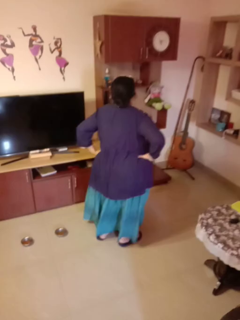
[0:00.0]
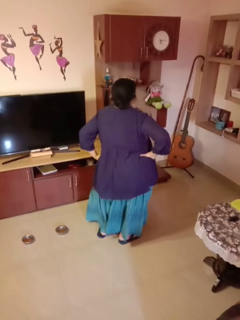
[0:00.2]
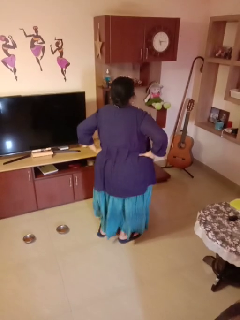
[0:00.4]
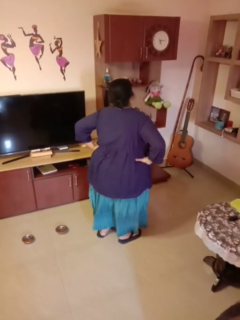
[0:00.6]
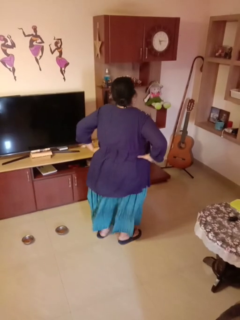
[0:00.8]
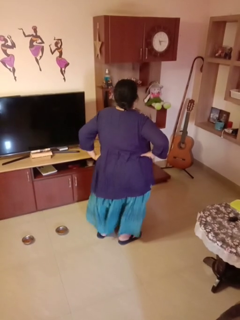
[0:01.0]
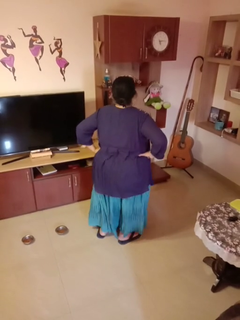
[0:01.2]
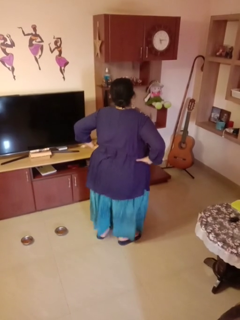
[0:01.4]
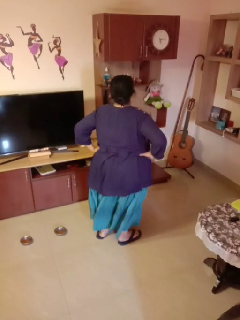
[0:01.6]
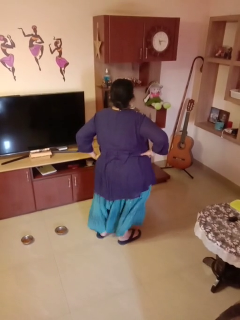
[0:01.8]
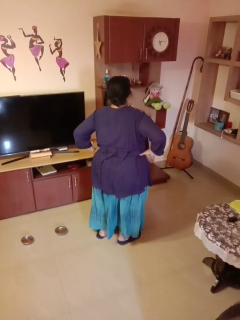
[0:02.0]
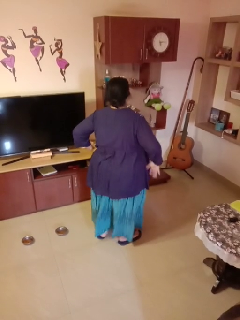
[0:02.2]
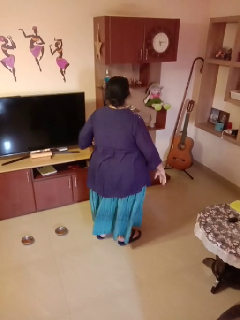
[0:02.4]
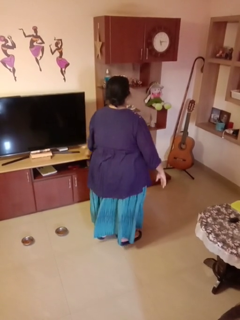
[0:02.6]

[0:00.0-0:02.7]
person wiggles hips

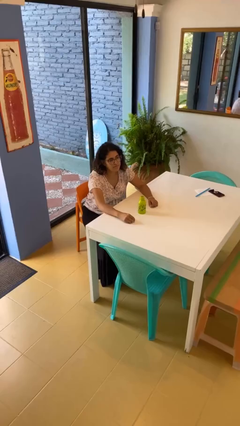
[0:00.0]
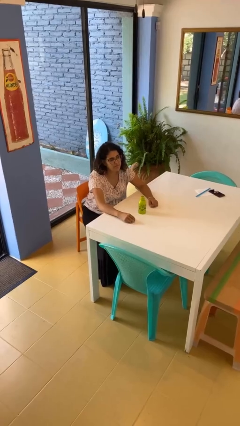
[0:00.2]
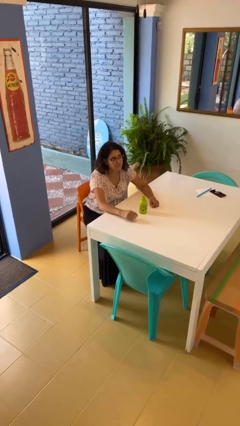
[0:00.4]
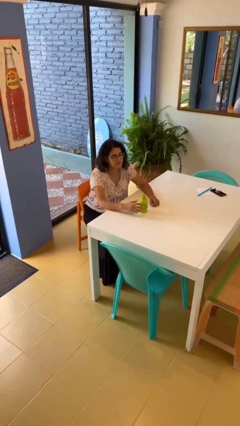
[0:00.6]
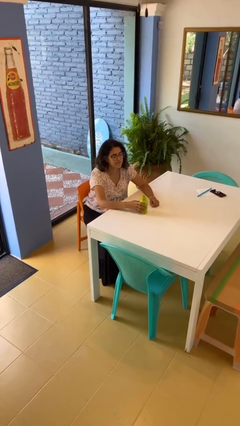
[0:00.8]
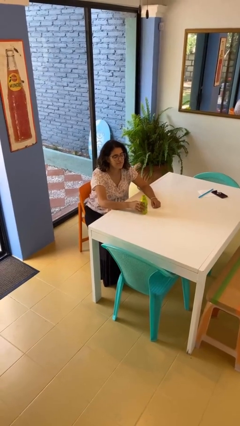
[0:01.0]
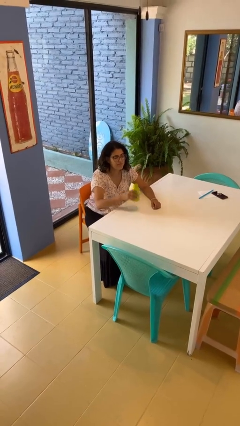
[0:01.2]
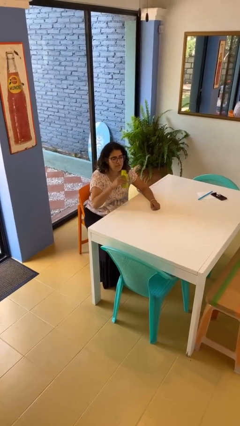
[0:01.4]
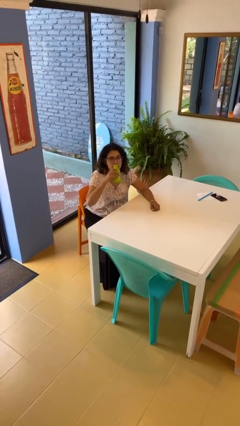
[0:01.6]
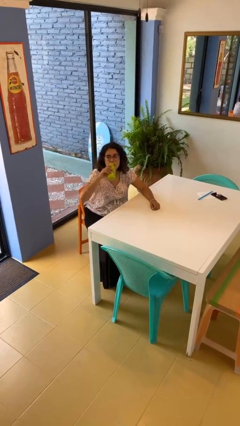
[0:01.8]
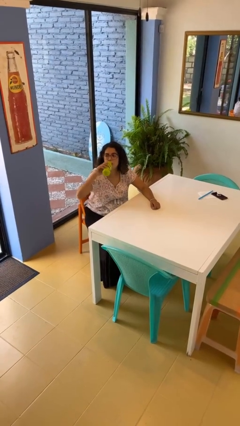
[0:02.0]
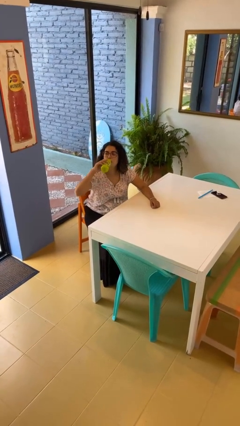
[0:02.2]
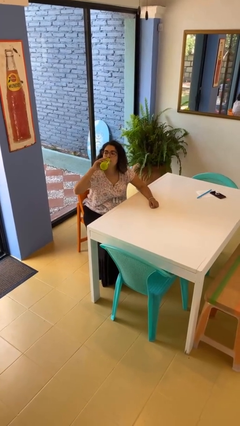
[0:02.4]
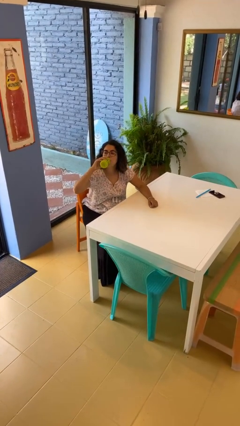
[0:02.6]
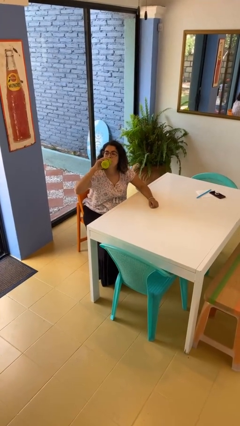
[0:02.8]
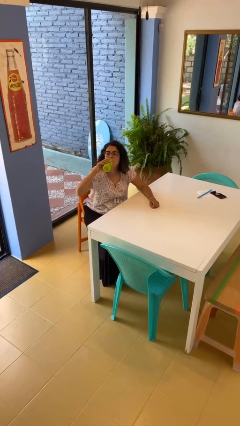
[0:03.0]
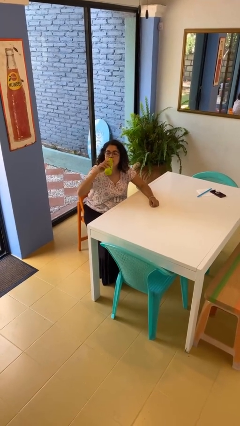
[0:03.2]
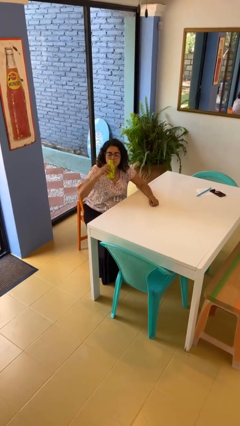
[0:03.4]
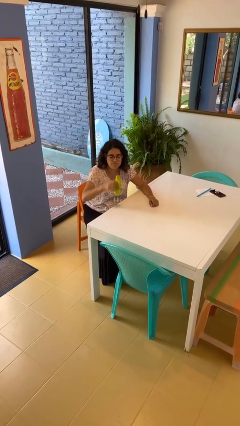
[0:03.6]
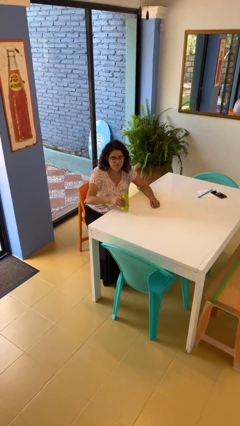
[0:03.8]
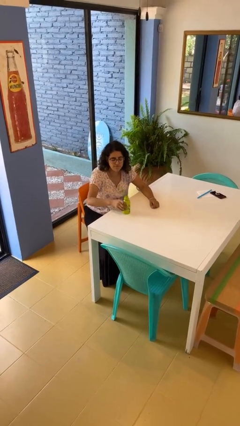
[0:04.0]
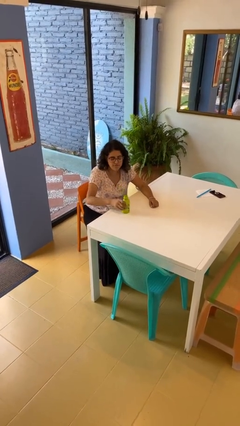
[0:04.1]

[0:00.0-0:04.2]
person drinks from bottle

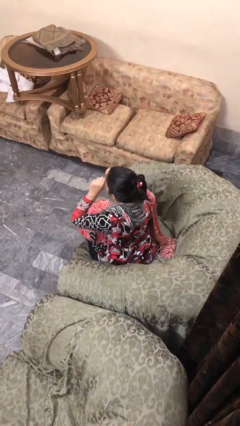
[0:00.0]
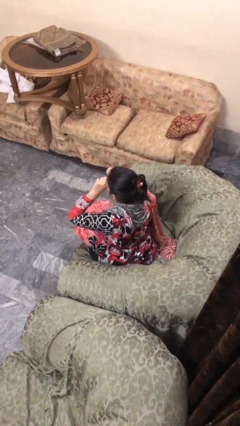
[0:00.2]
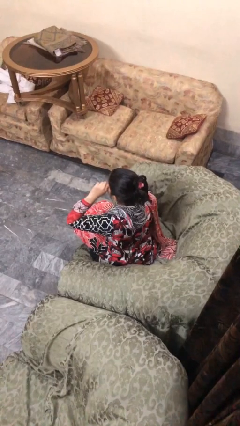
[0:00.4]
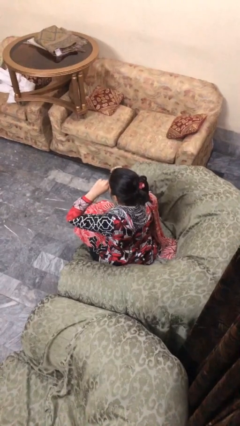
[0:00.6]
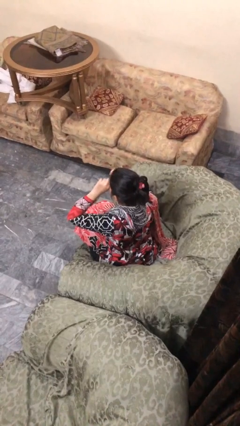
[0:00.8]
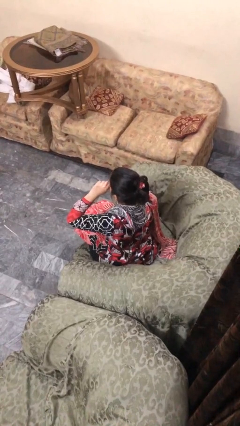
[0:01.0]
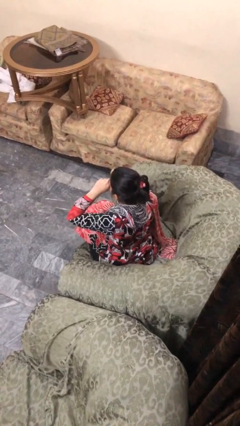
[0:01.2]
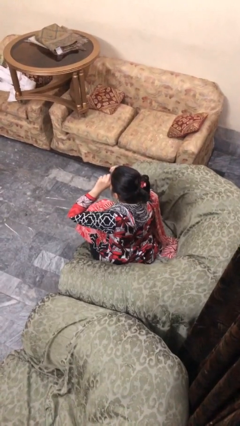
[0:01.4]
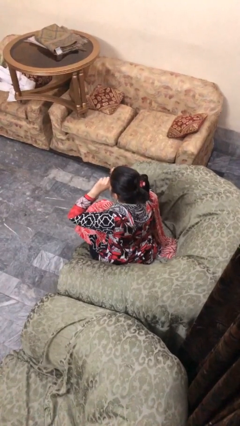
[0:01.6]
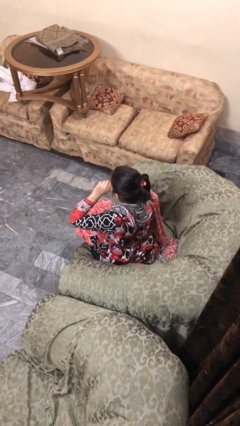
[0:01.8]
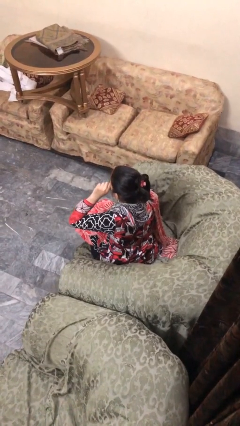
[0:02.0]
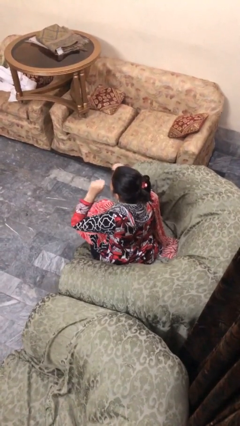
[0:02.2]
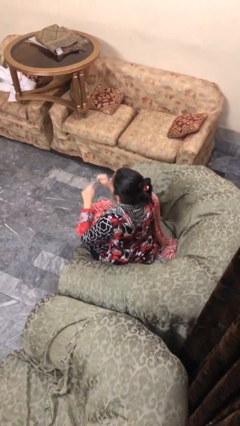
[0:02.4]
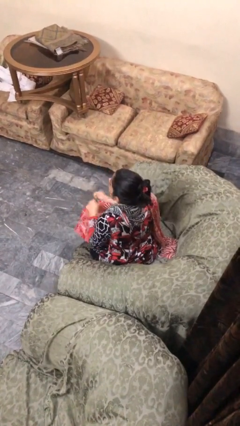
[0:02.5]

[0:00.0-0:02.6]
person rubs eyes

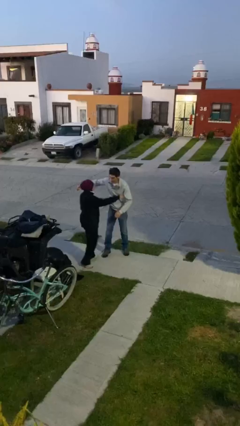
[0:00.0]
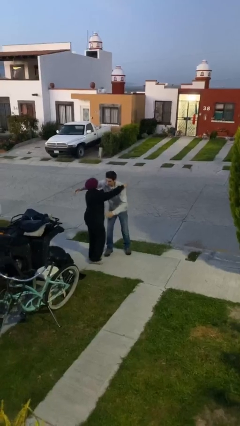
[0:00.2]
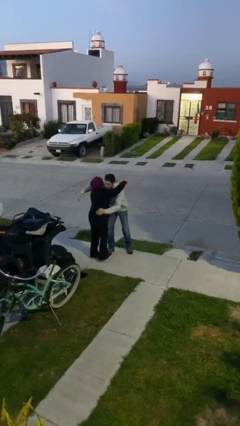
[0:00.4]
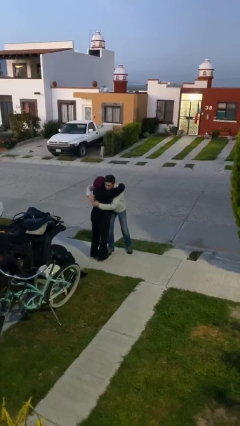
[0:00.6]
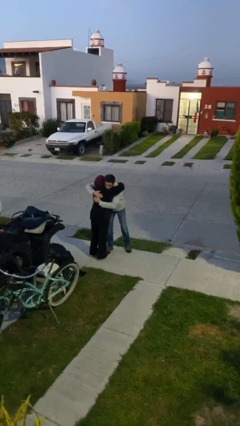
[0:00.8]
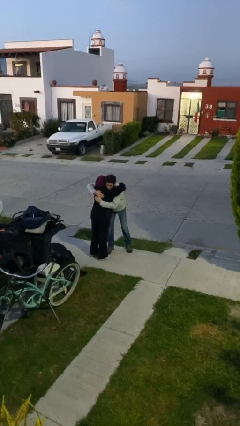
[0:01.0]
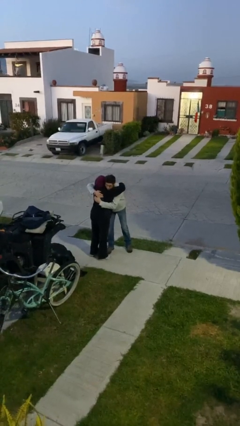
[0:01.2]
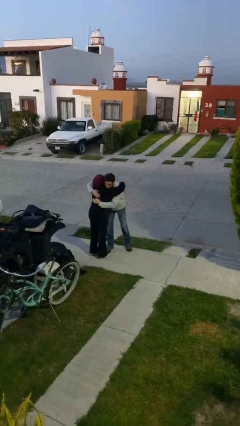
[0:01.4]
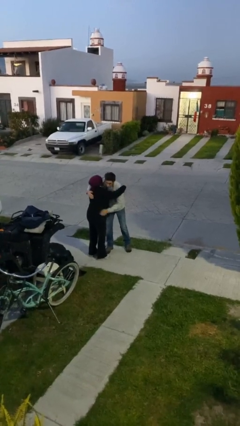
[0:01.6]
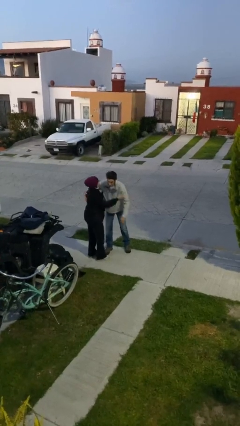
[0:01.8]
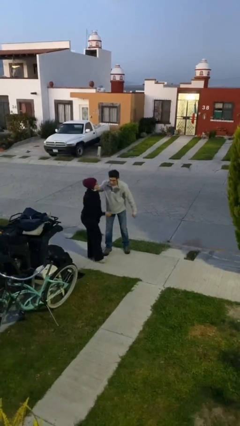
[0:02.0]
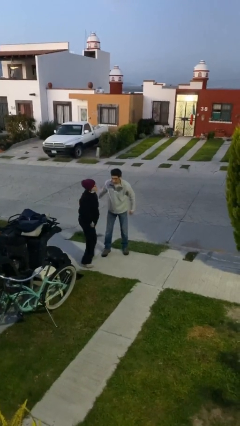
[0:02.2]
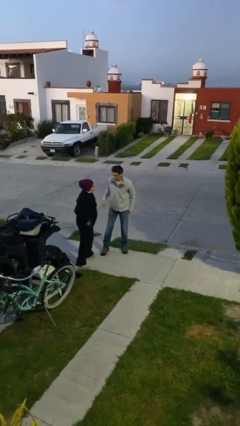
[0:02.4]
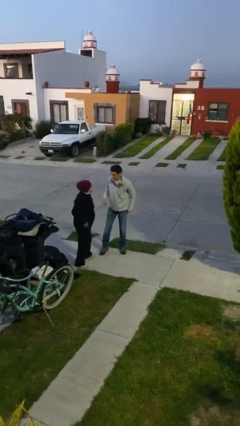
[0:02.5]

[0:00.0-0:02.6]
person embraces person

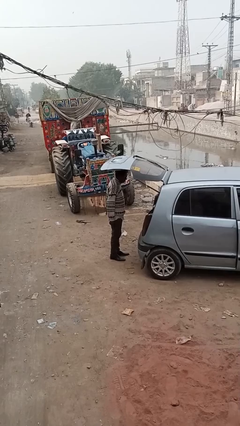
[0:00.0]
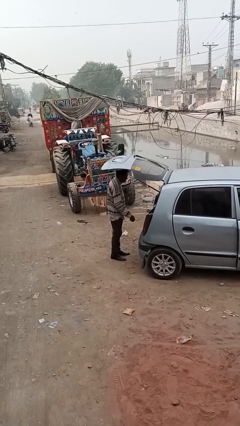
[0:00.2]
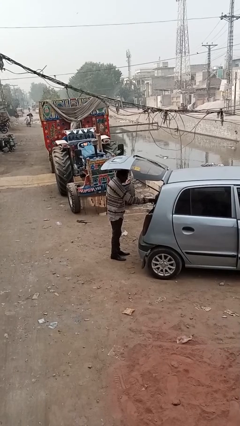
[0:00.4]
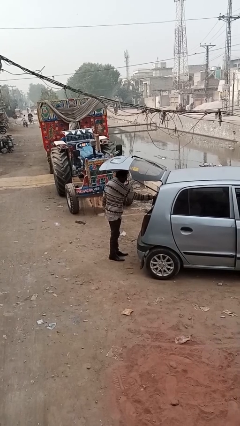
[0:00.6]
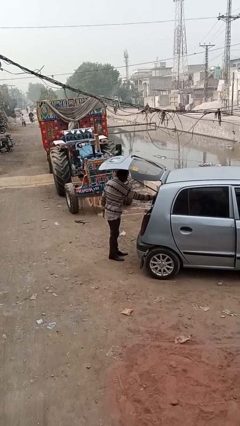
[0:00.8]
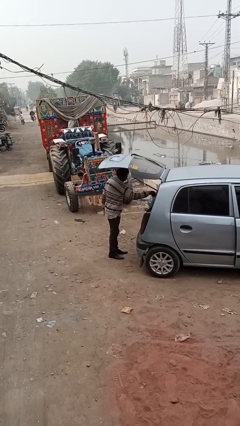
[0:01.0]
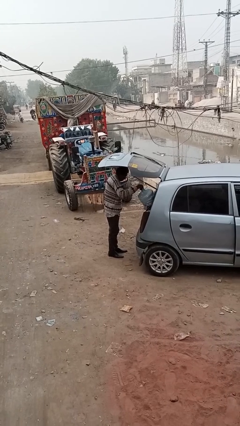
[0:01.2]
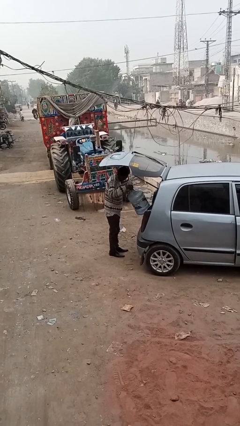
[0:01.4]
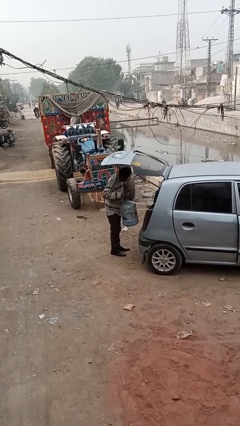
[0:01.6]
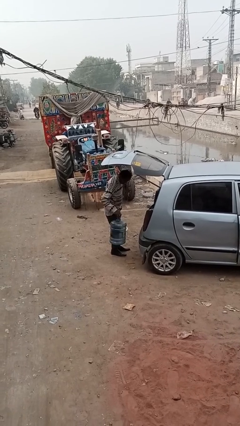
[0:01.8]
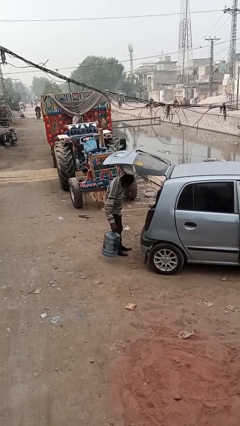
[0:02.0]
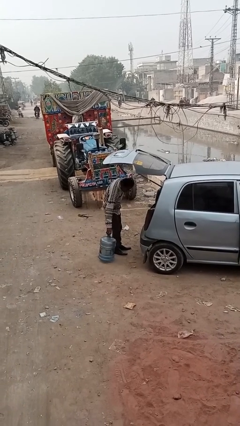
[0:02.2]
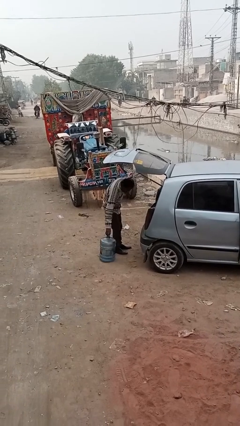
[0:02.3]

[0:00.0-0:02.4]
person unloads car

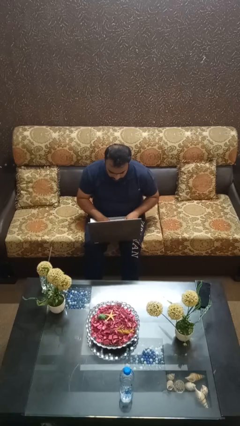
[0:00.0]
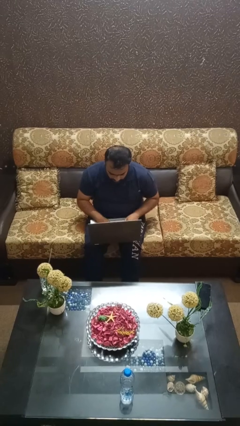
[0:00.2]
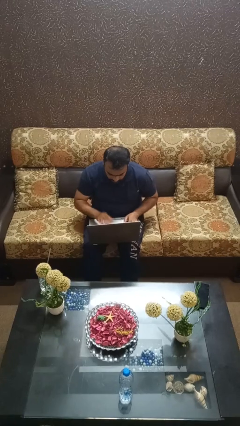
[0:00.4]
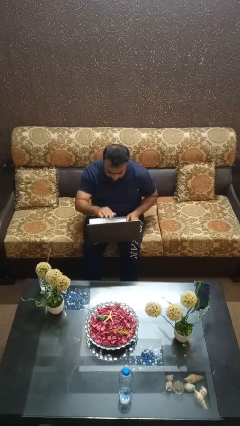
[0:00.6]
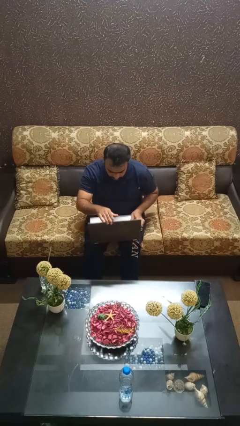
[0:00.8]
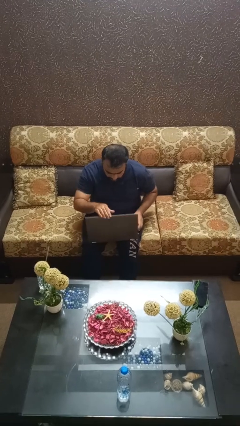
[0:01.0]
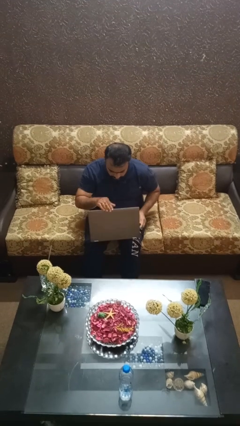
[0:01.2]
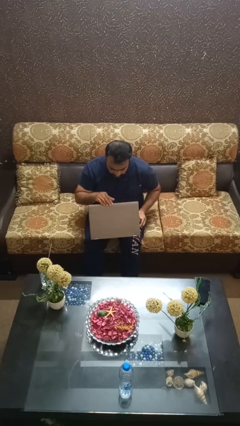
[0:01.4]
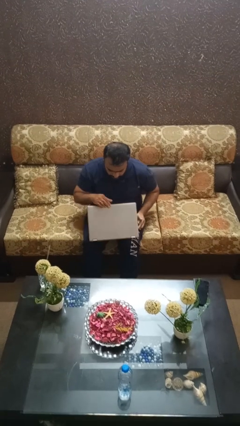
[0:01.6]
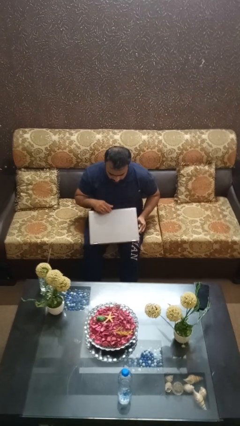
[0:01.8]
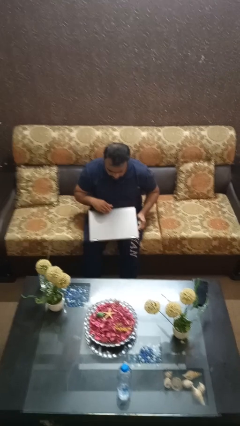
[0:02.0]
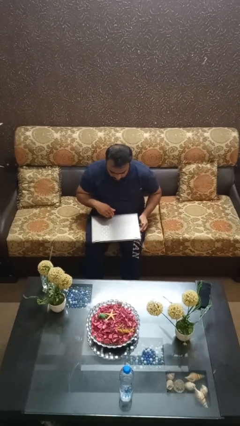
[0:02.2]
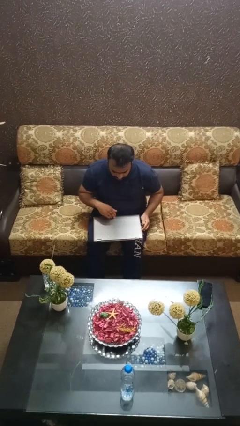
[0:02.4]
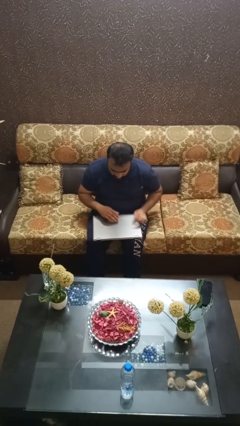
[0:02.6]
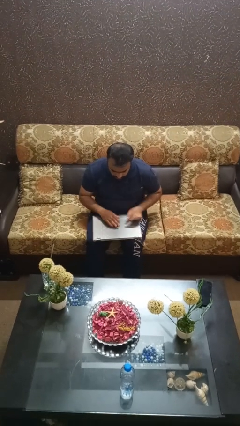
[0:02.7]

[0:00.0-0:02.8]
person closes laptop

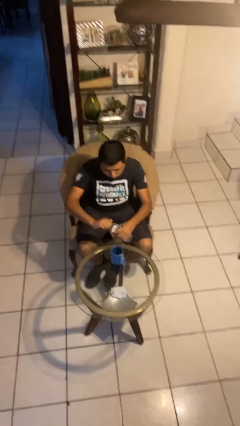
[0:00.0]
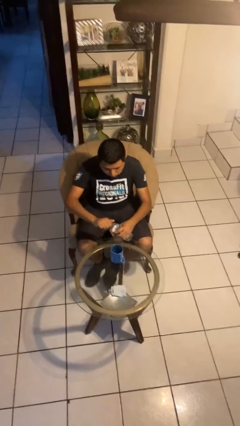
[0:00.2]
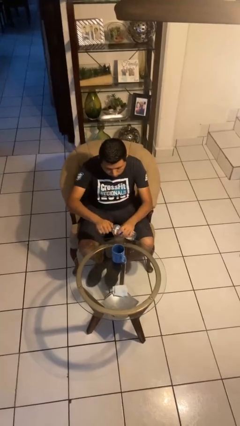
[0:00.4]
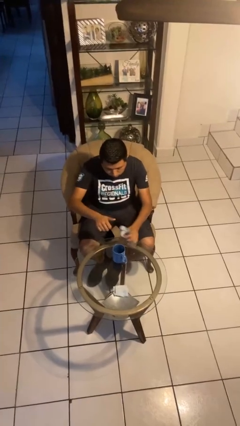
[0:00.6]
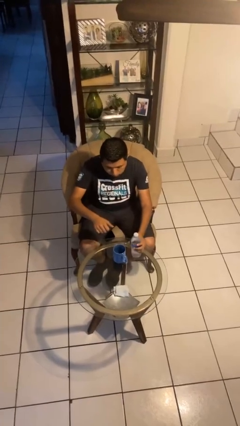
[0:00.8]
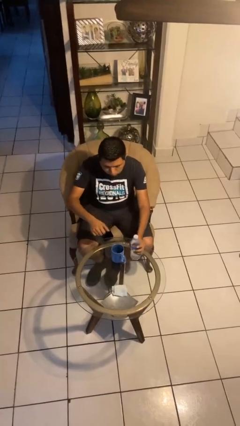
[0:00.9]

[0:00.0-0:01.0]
person screws lid to bottle
